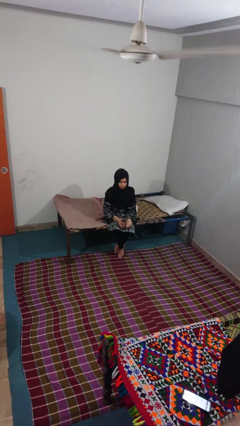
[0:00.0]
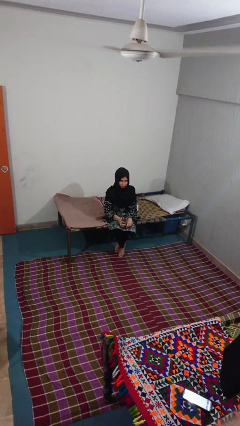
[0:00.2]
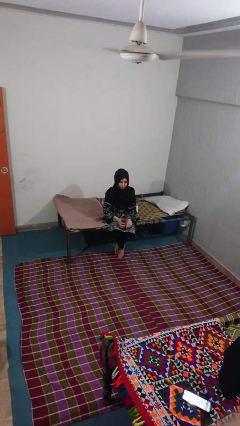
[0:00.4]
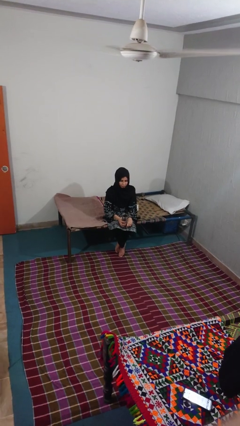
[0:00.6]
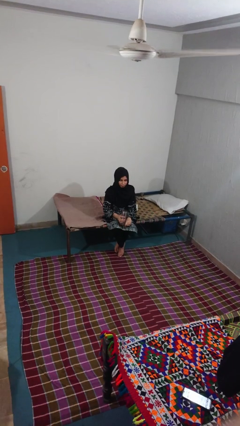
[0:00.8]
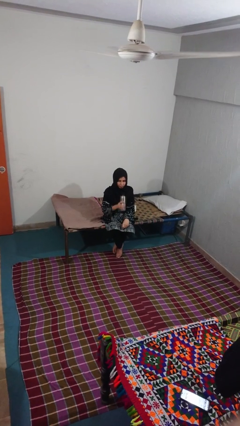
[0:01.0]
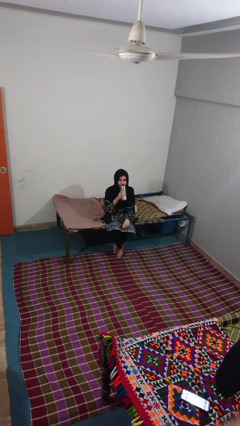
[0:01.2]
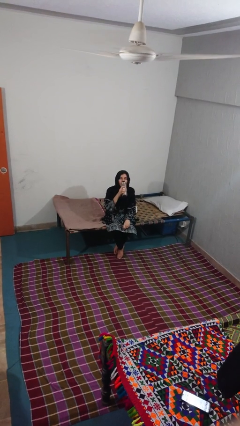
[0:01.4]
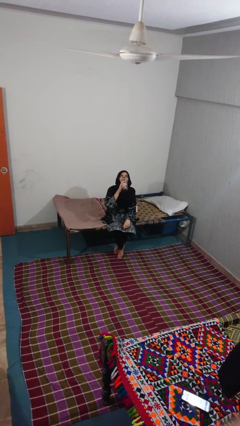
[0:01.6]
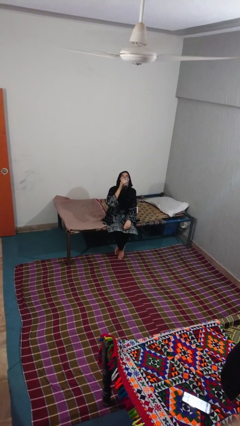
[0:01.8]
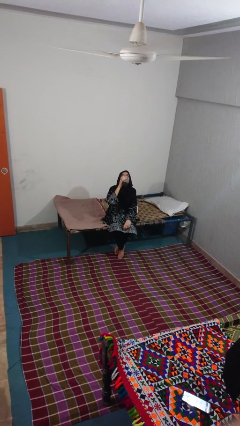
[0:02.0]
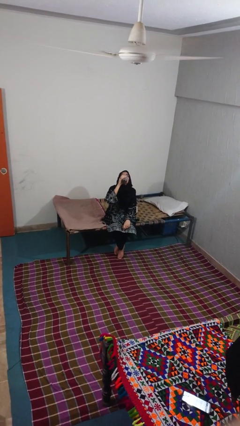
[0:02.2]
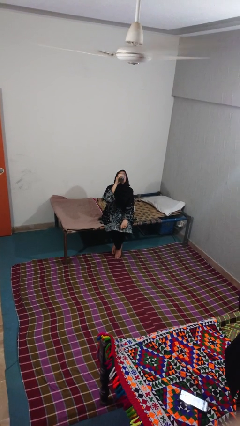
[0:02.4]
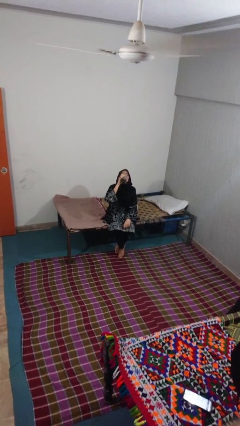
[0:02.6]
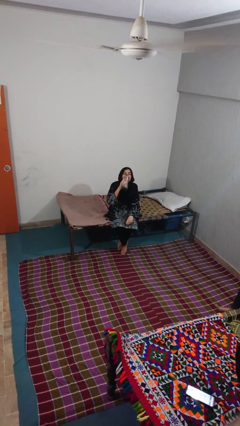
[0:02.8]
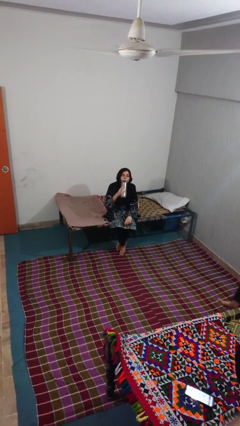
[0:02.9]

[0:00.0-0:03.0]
person drinks from beverage can

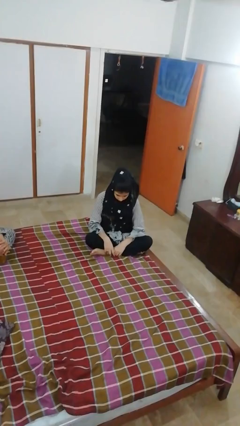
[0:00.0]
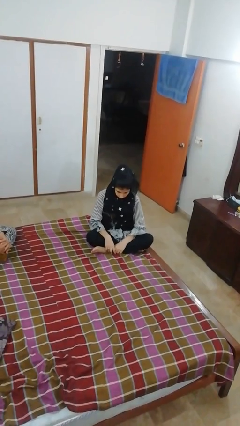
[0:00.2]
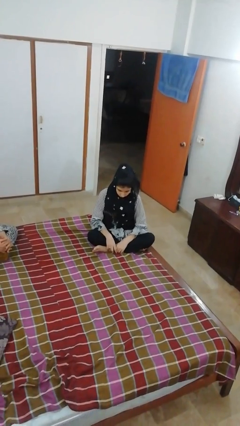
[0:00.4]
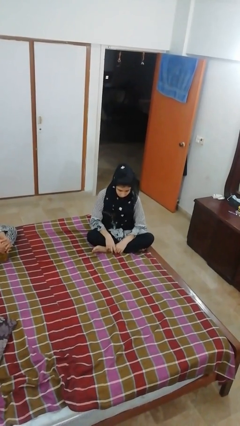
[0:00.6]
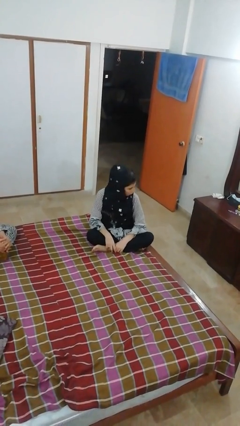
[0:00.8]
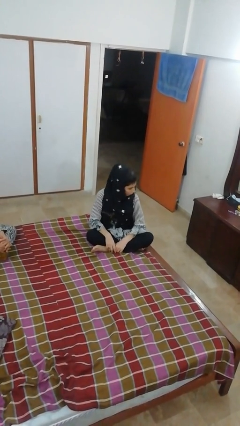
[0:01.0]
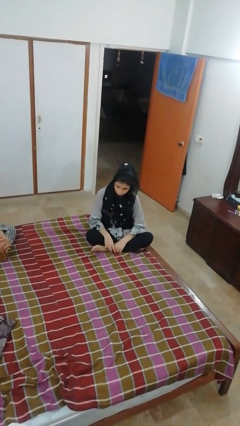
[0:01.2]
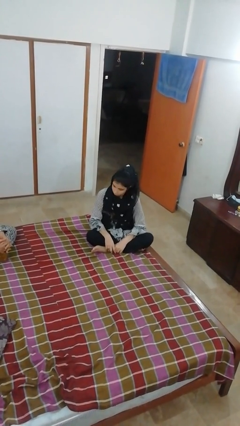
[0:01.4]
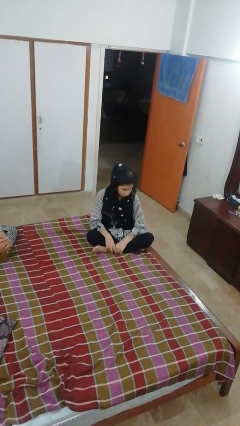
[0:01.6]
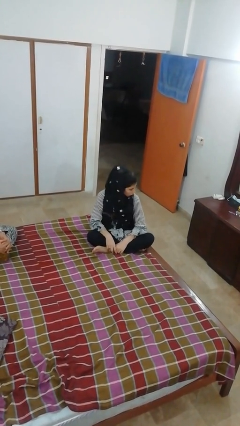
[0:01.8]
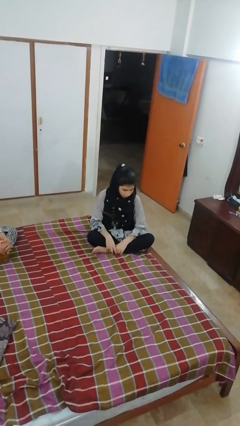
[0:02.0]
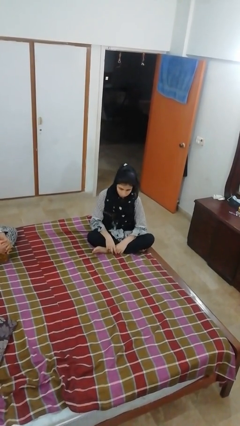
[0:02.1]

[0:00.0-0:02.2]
person shakes head

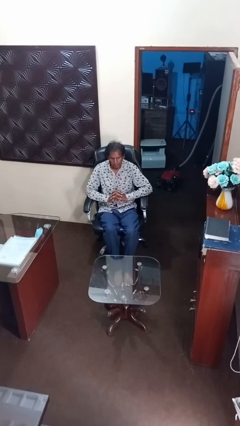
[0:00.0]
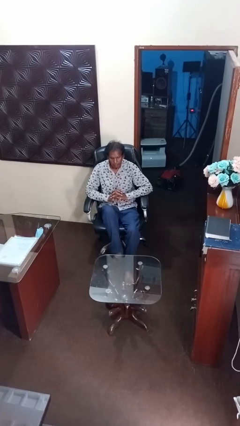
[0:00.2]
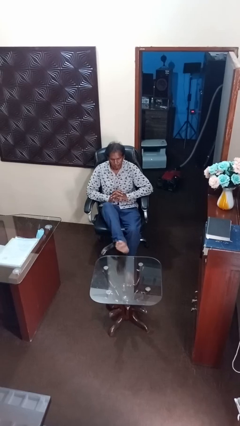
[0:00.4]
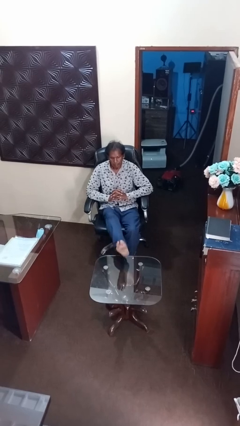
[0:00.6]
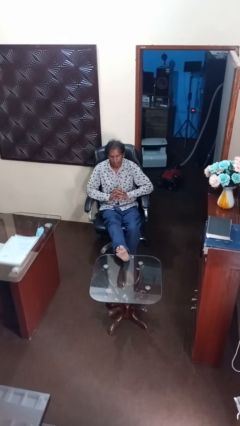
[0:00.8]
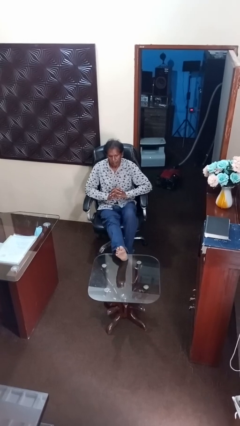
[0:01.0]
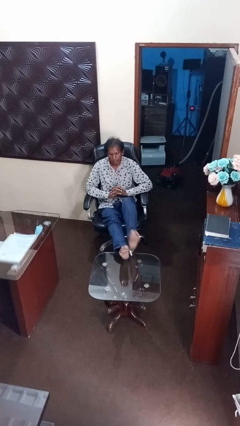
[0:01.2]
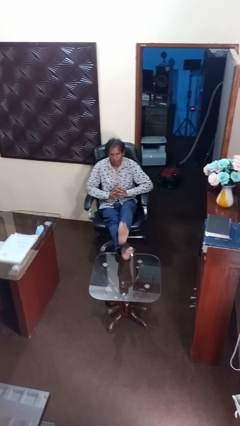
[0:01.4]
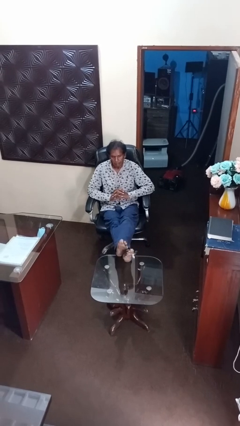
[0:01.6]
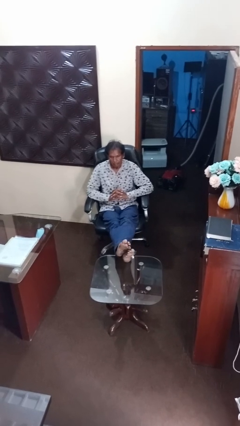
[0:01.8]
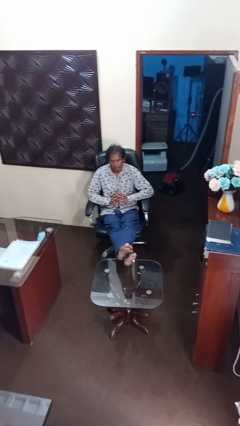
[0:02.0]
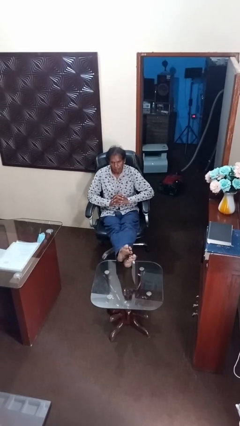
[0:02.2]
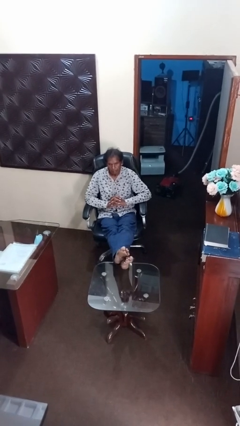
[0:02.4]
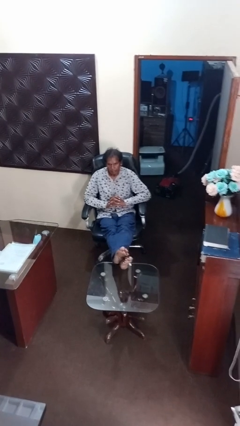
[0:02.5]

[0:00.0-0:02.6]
person puts feet up

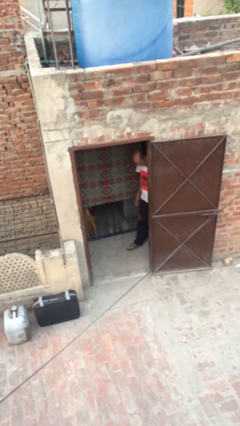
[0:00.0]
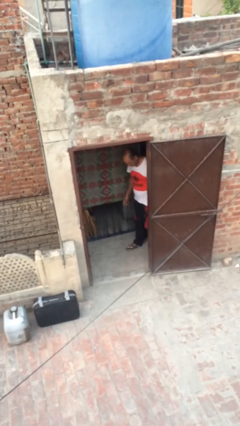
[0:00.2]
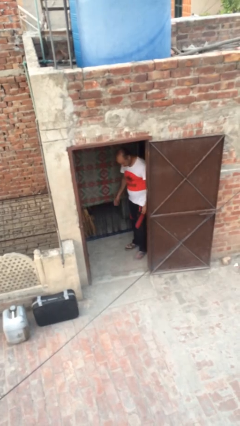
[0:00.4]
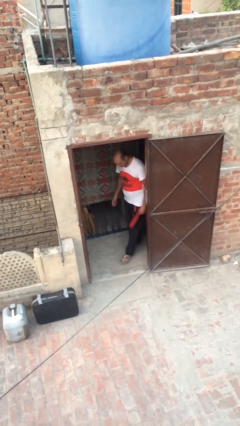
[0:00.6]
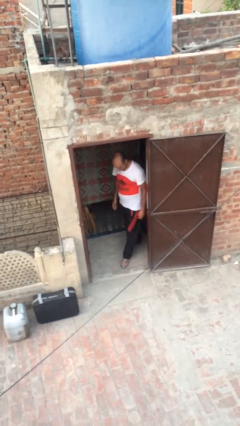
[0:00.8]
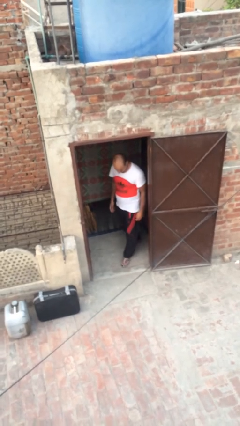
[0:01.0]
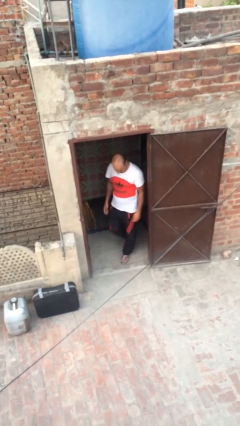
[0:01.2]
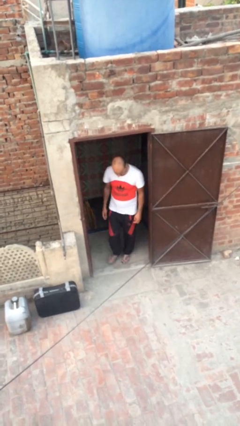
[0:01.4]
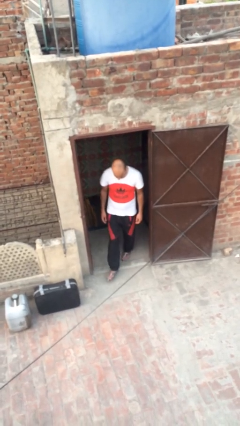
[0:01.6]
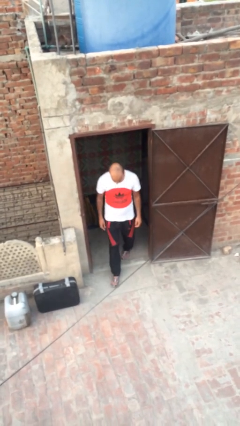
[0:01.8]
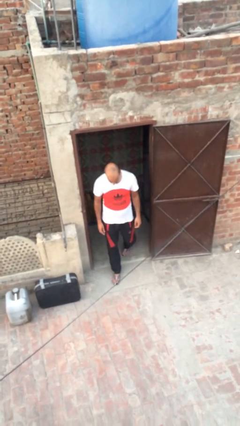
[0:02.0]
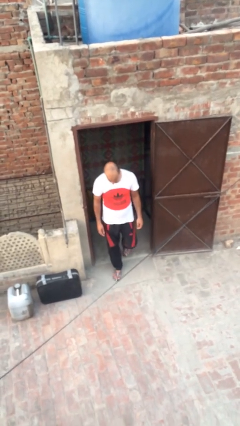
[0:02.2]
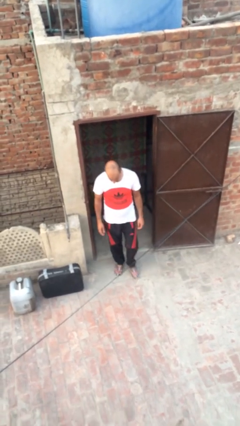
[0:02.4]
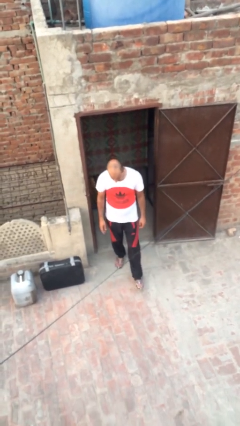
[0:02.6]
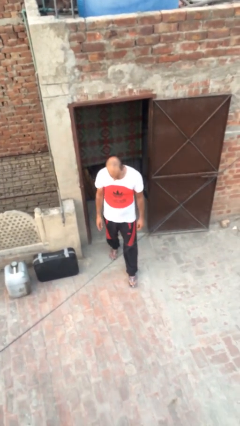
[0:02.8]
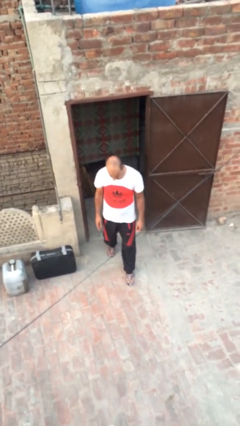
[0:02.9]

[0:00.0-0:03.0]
person enters scene through structure

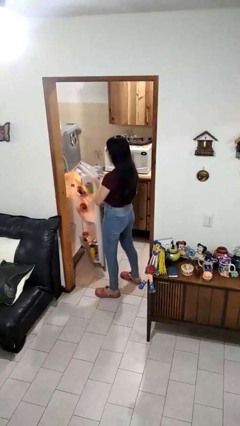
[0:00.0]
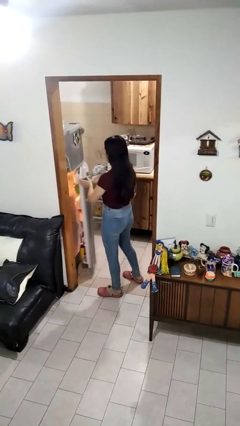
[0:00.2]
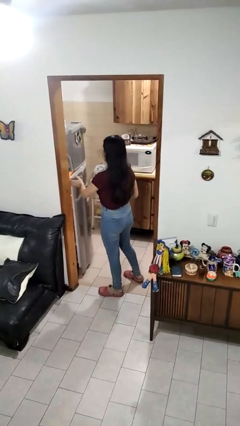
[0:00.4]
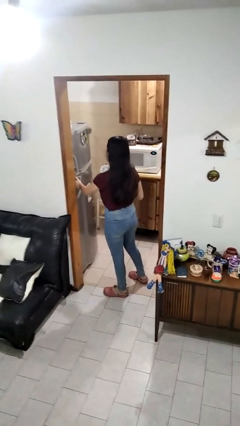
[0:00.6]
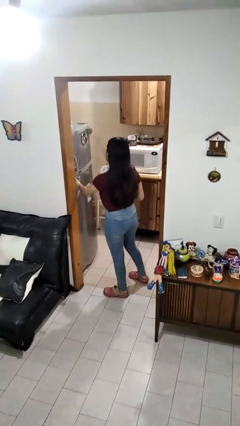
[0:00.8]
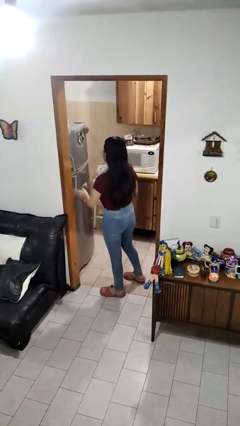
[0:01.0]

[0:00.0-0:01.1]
person closes refrigerator

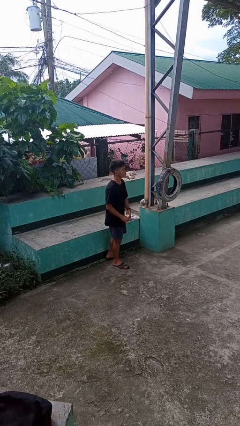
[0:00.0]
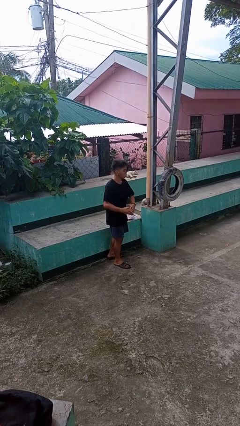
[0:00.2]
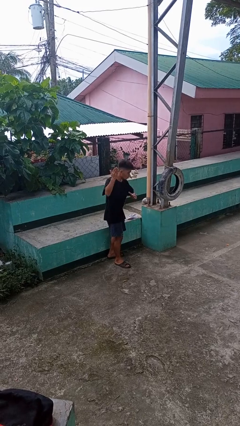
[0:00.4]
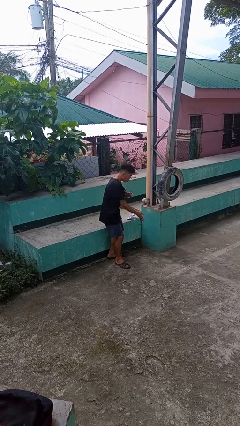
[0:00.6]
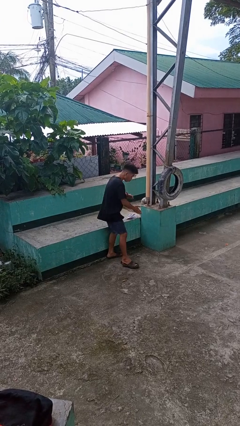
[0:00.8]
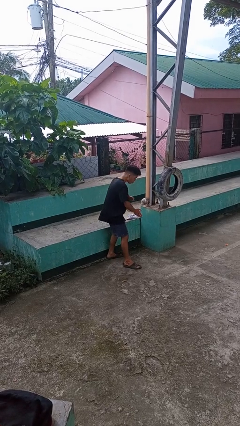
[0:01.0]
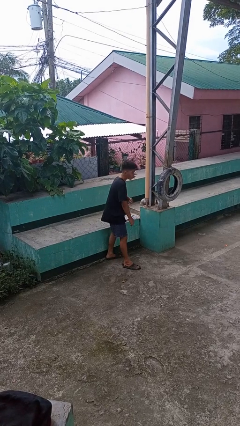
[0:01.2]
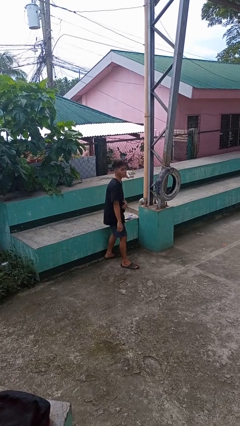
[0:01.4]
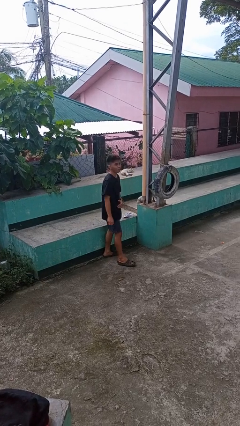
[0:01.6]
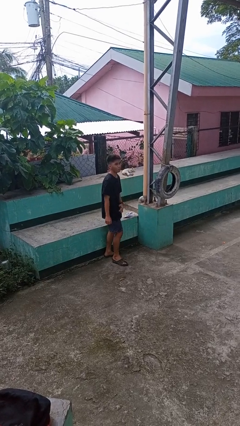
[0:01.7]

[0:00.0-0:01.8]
person karate chop

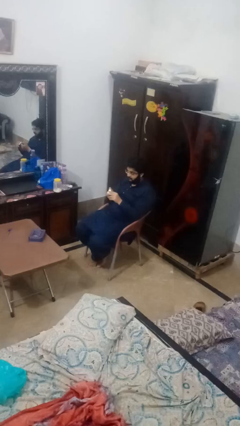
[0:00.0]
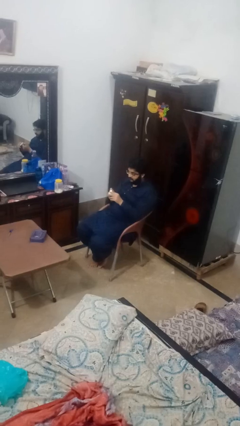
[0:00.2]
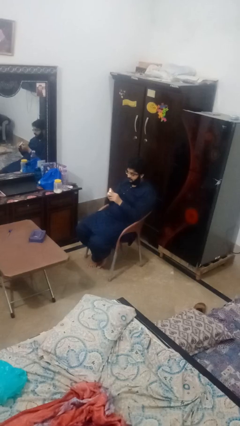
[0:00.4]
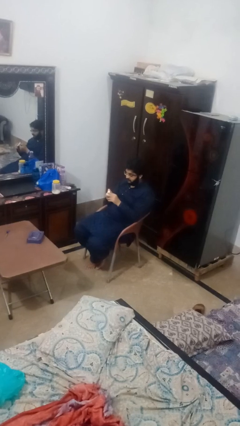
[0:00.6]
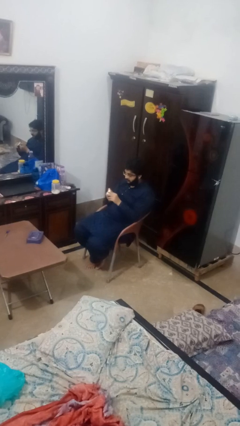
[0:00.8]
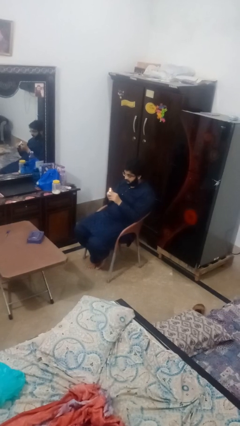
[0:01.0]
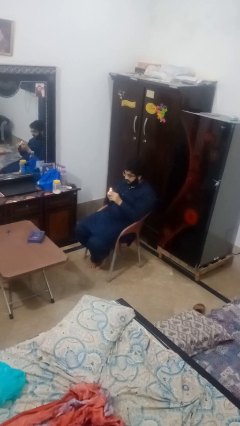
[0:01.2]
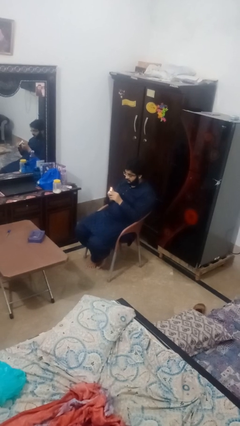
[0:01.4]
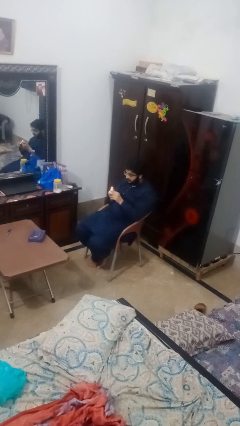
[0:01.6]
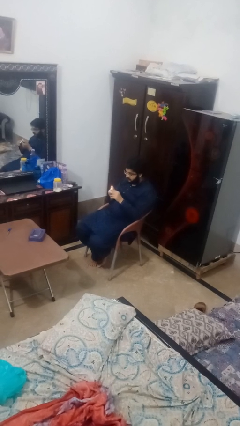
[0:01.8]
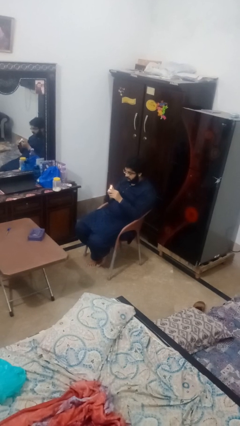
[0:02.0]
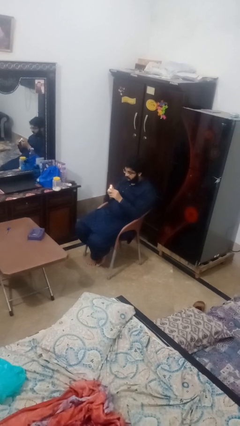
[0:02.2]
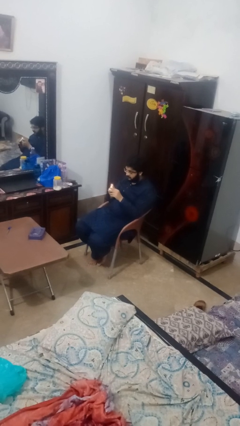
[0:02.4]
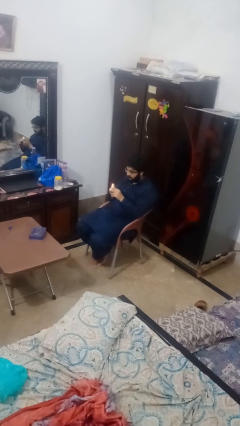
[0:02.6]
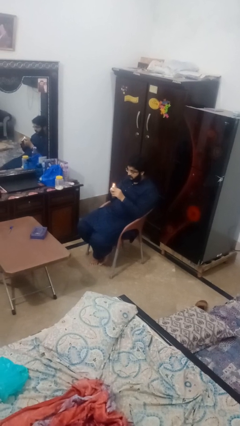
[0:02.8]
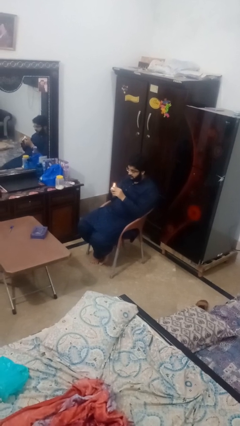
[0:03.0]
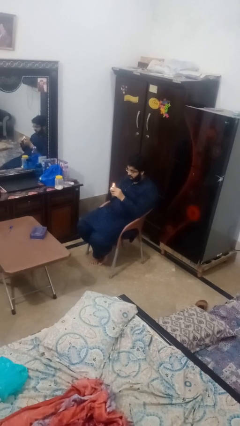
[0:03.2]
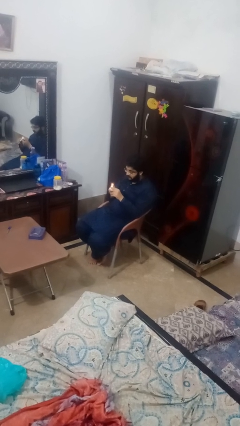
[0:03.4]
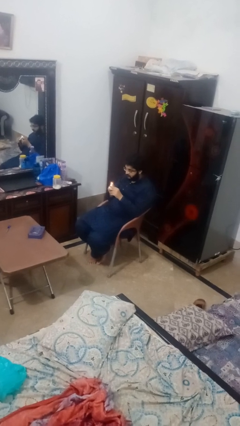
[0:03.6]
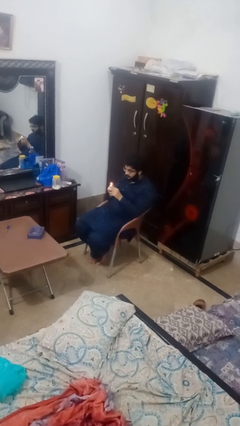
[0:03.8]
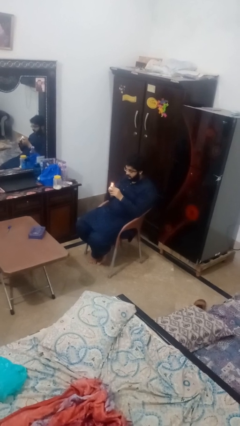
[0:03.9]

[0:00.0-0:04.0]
person lights candle
